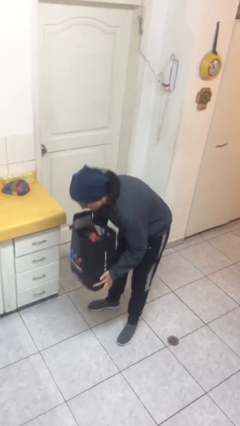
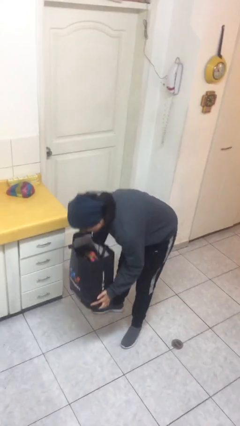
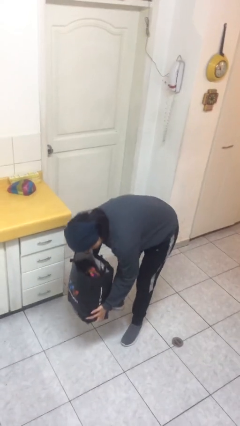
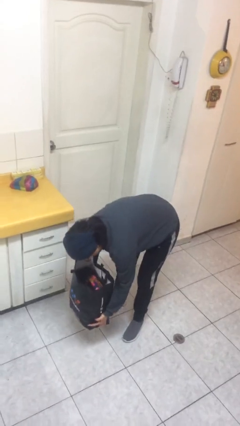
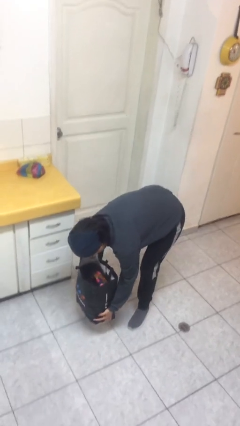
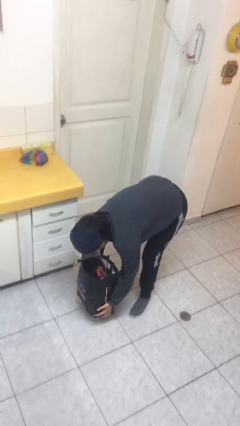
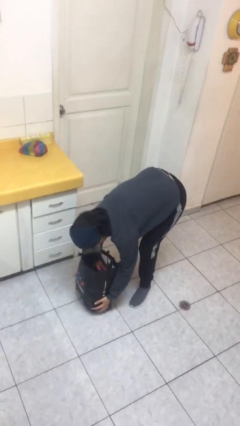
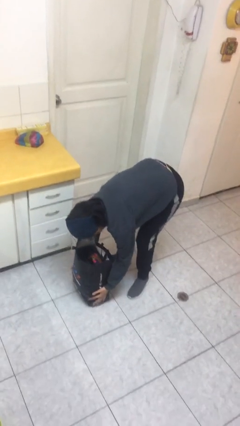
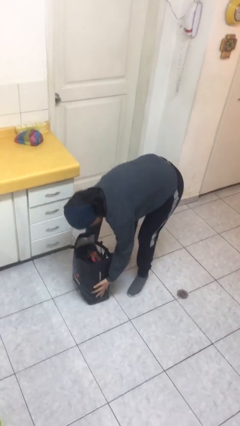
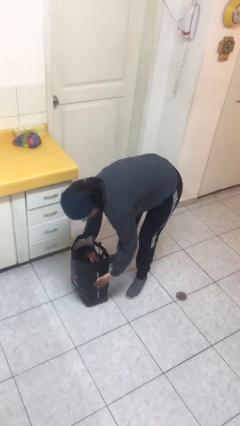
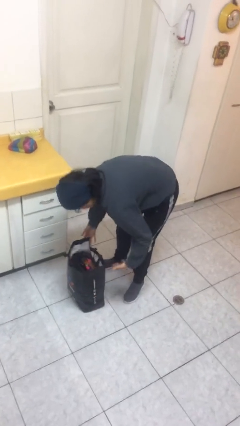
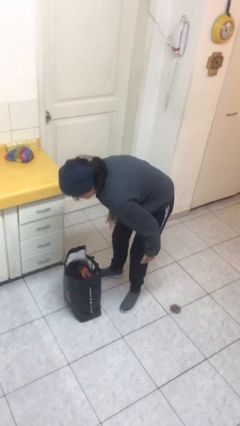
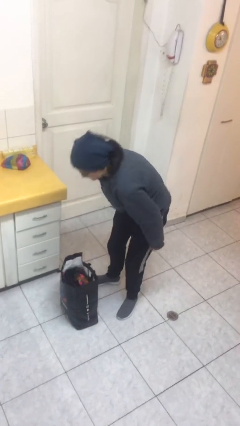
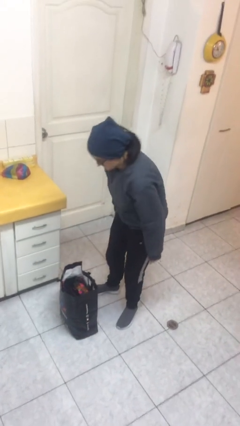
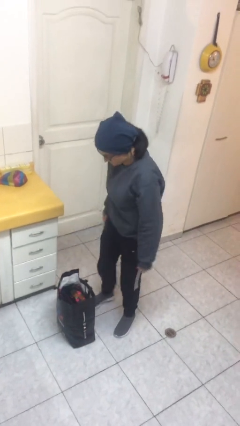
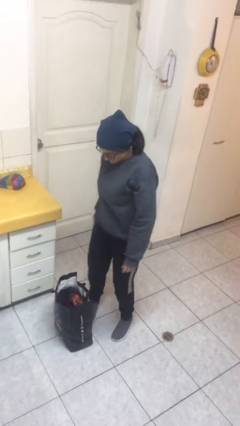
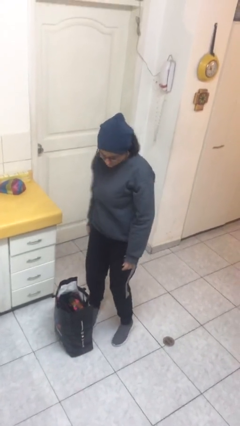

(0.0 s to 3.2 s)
person puts down object on floor

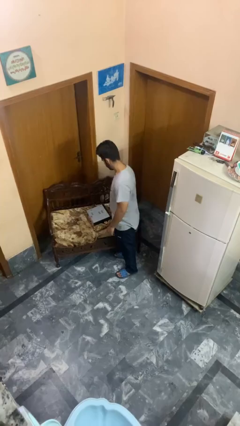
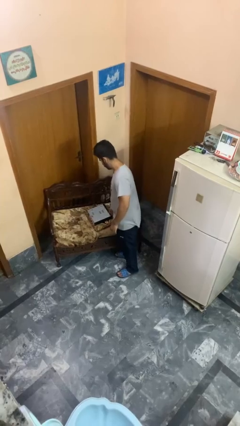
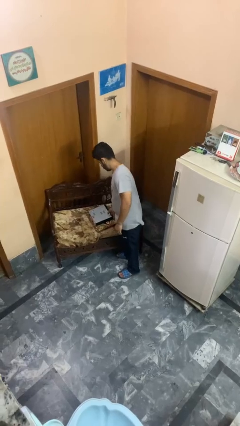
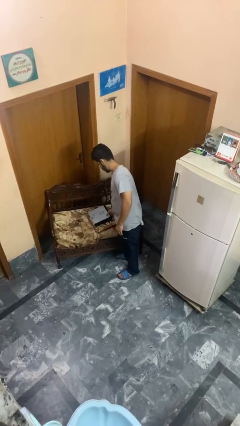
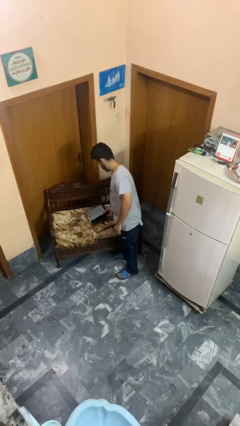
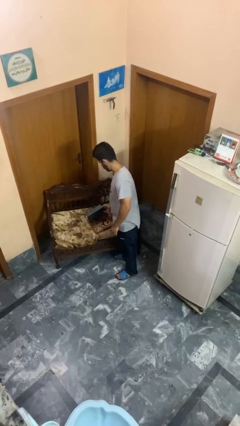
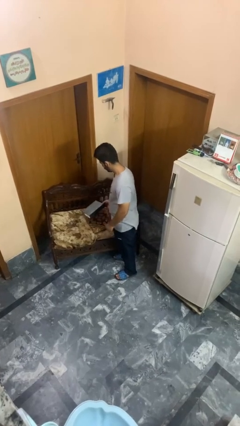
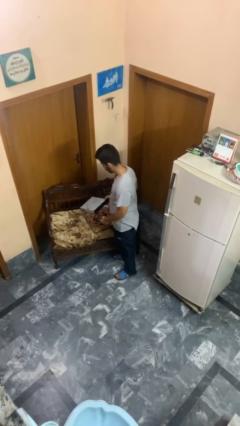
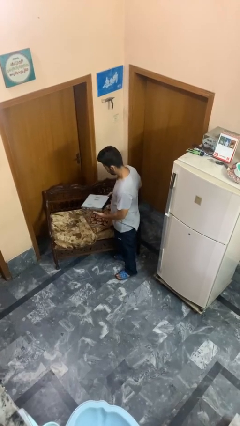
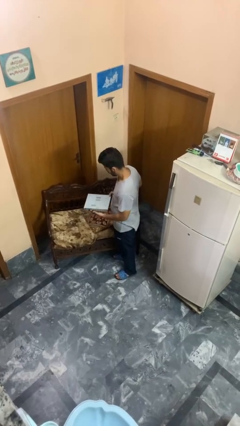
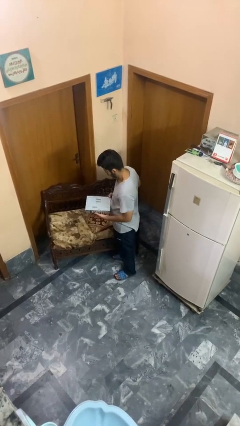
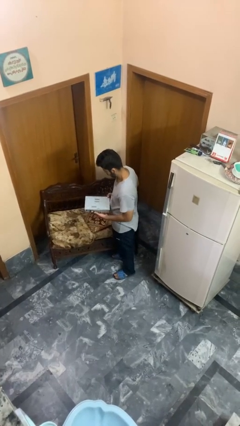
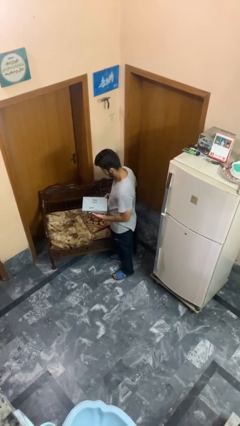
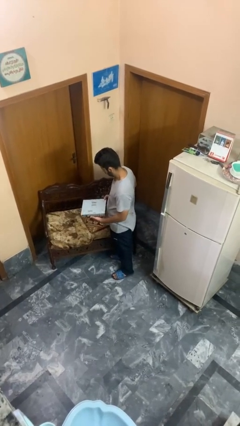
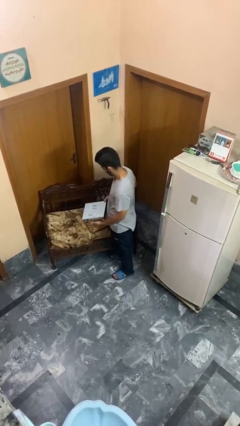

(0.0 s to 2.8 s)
person picks up object from couch

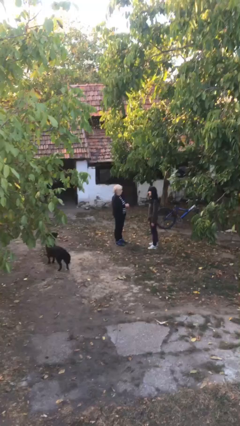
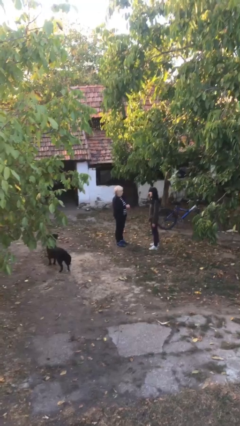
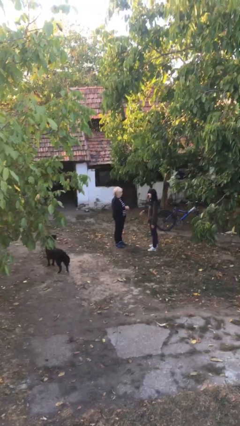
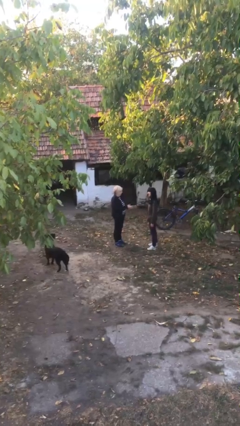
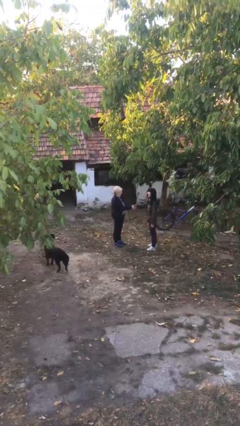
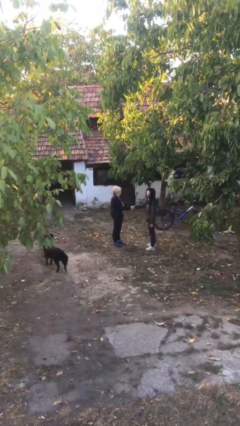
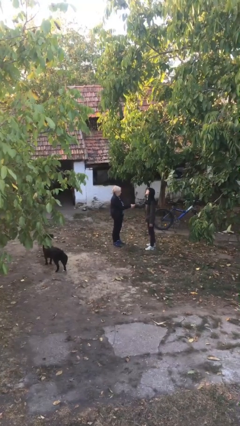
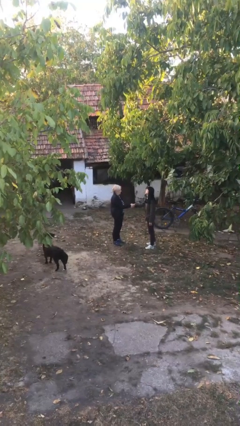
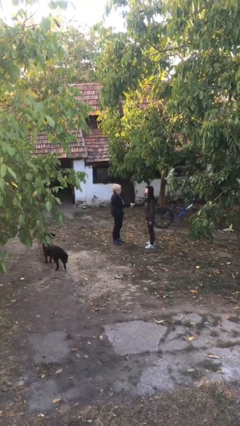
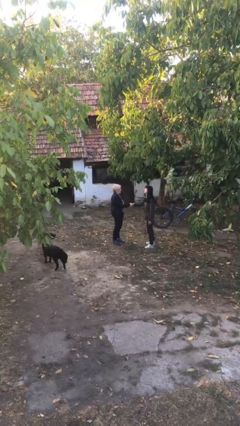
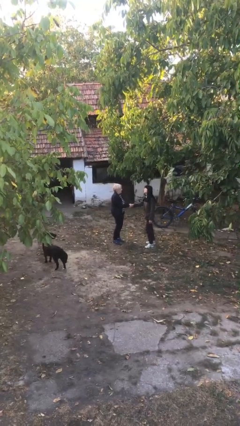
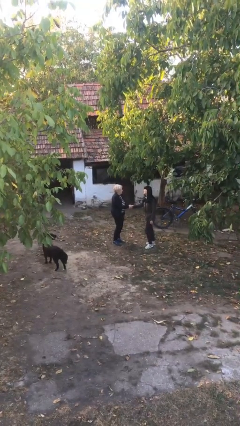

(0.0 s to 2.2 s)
person shakes hand

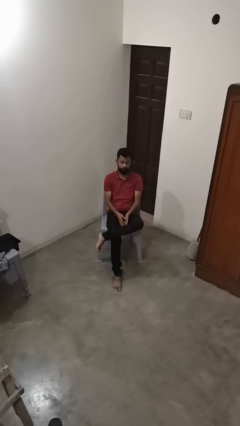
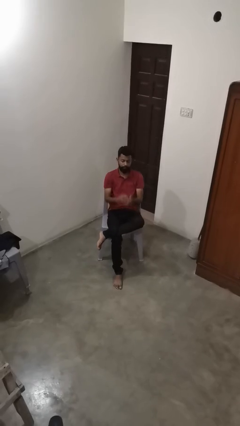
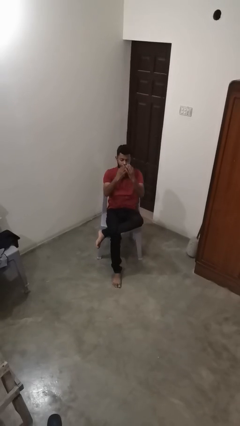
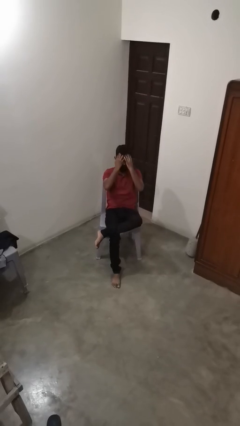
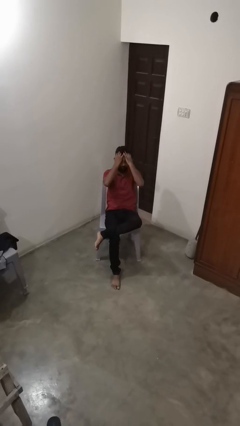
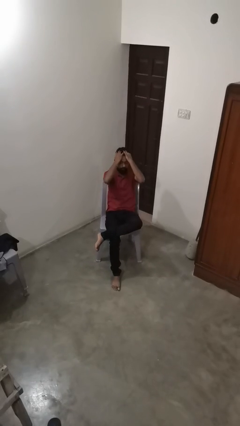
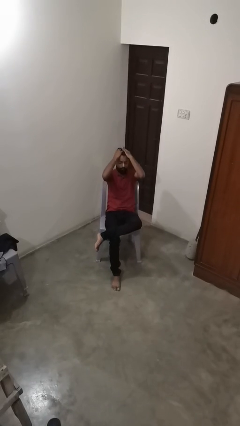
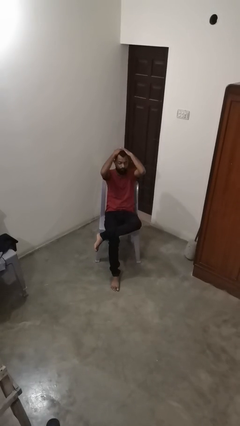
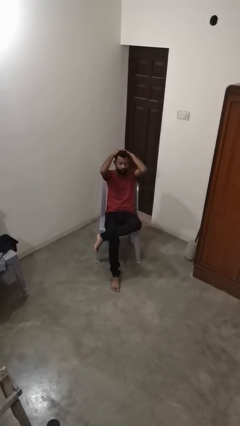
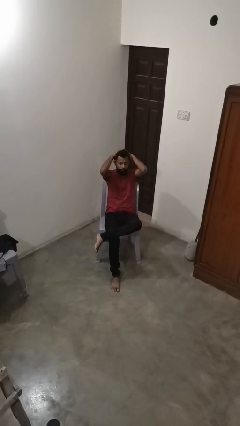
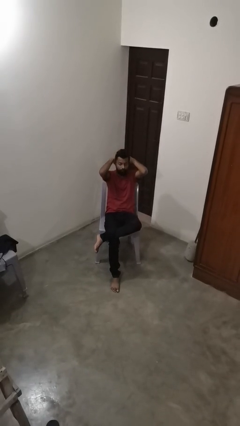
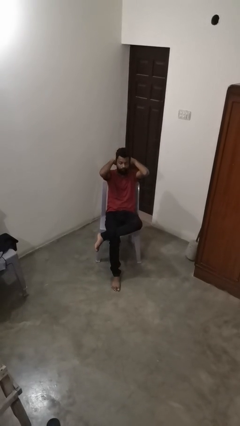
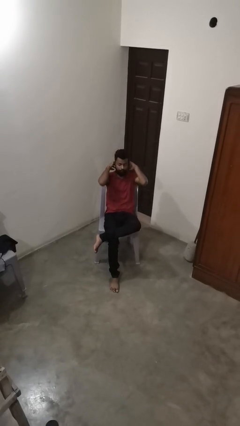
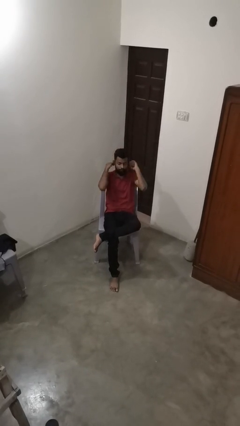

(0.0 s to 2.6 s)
person strokes hair

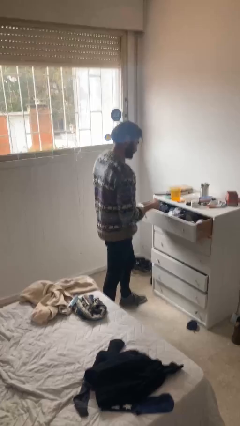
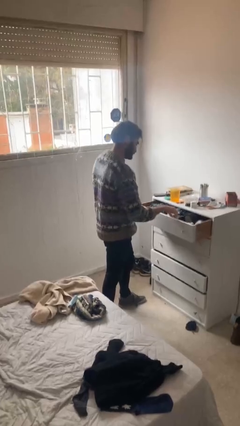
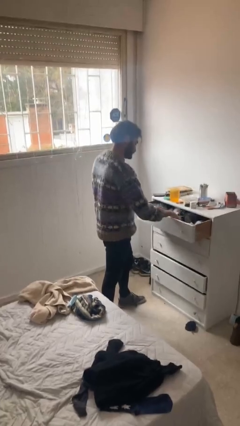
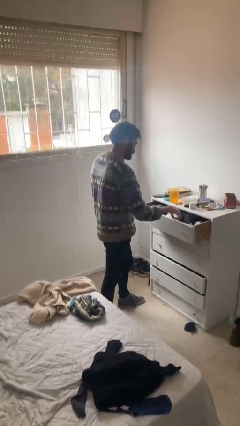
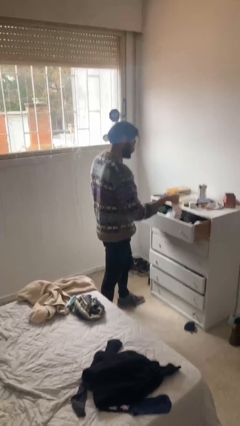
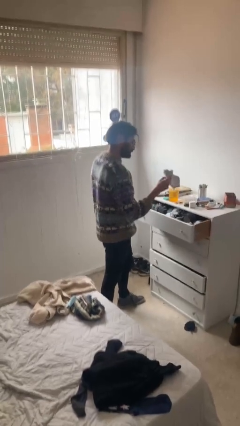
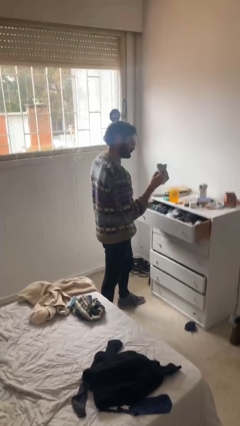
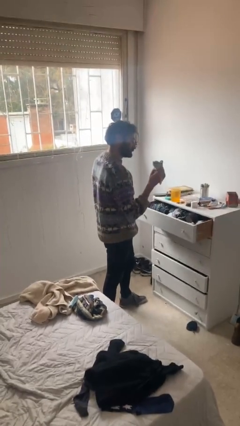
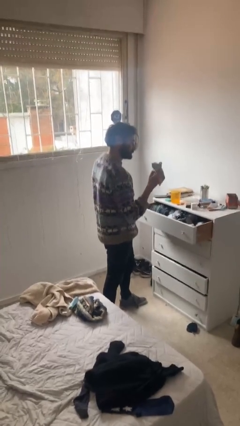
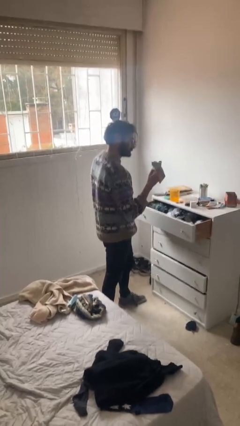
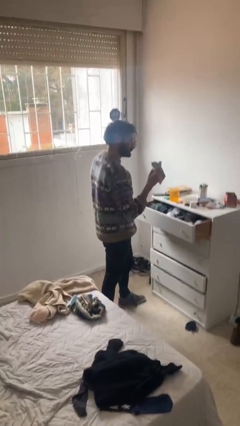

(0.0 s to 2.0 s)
person takes clothes from dresser

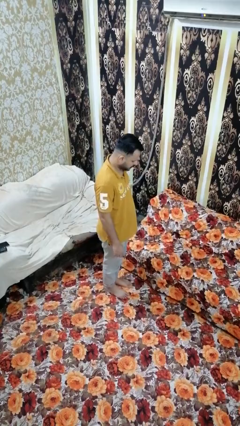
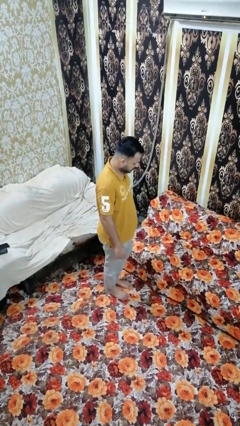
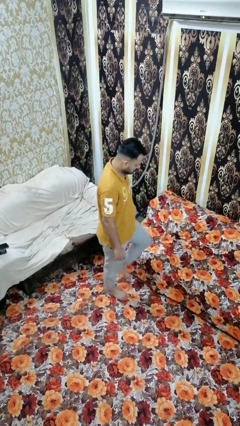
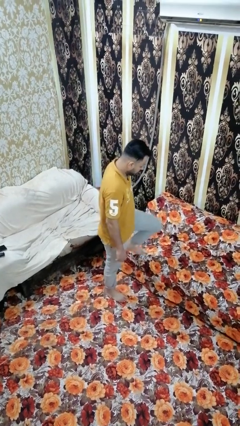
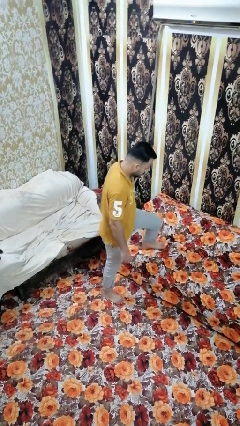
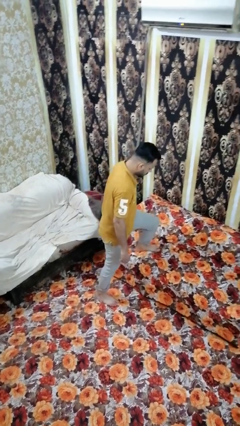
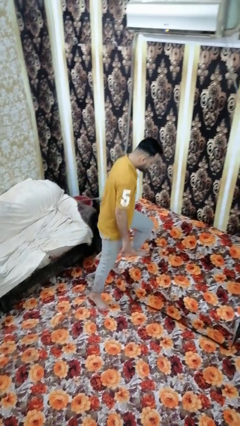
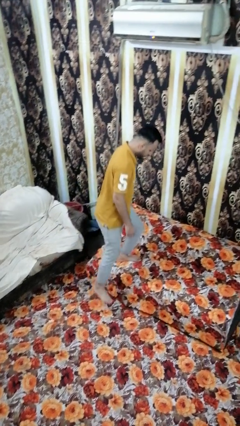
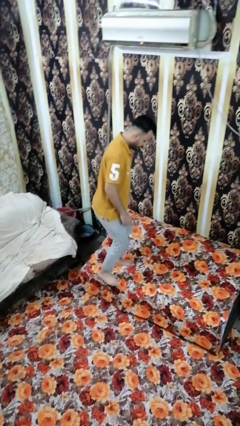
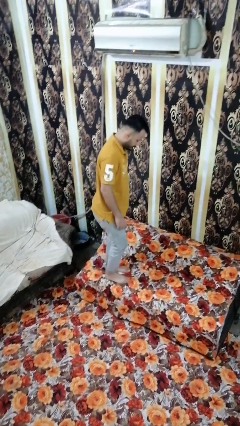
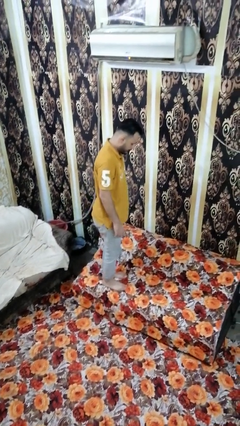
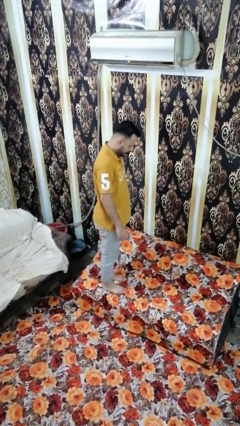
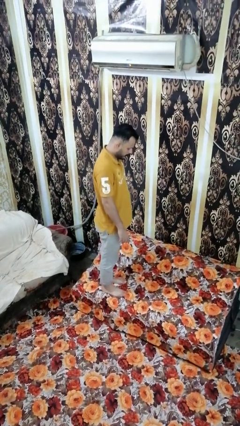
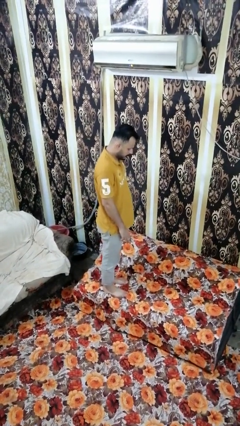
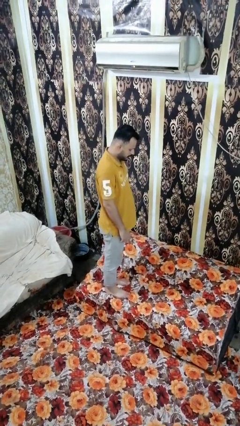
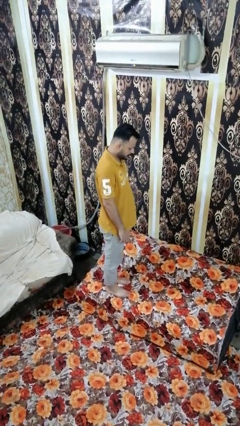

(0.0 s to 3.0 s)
person climbs on couch

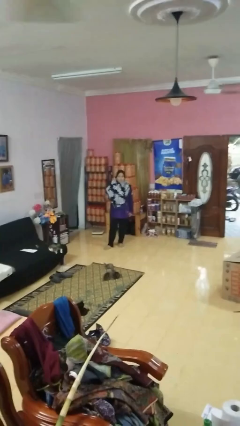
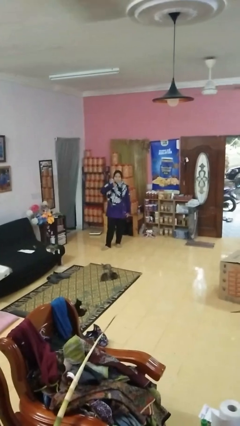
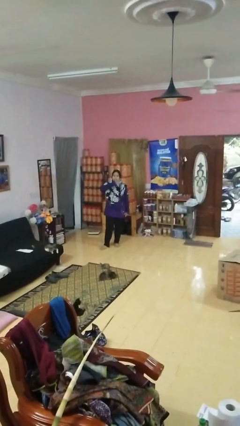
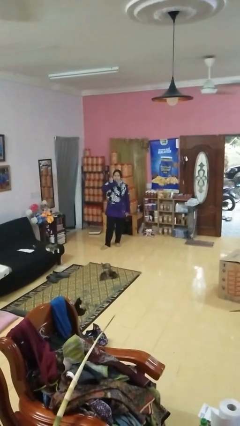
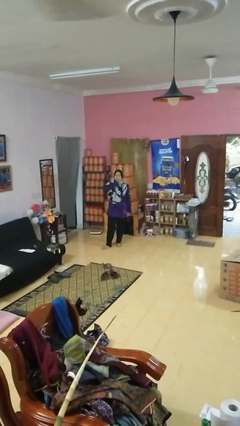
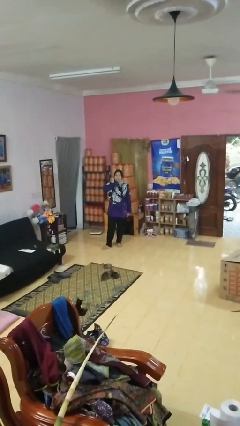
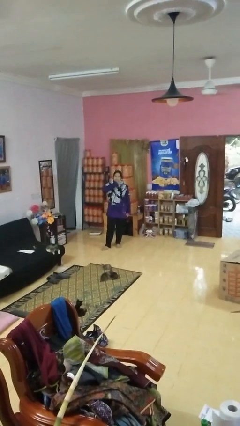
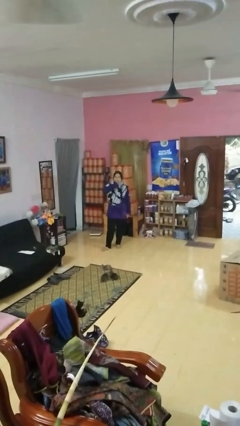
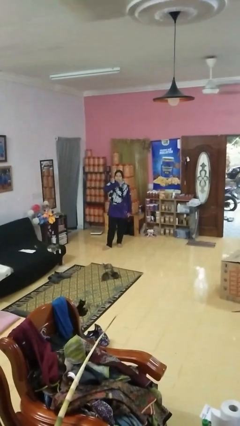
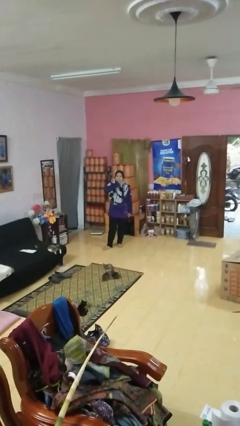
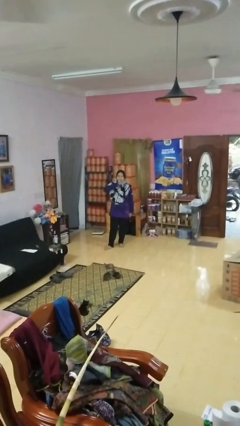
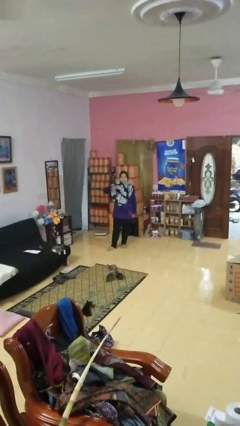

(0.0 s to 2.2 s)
person gestures be quiet
